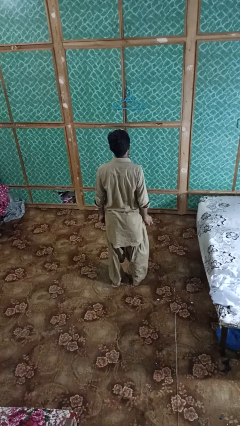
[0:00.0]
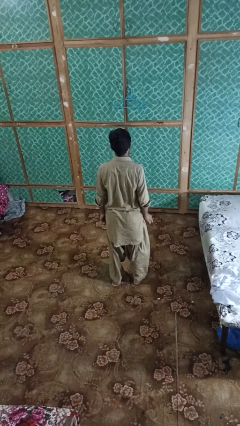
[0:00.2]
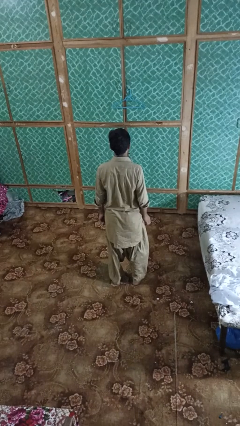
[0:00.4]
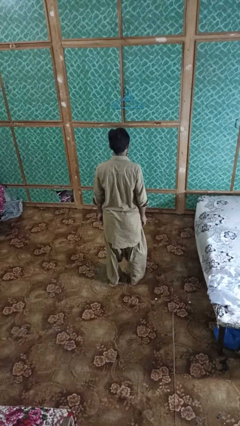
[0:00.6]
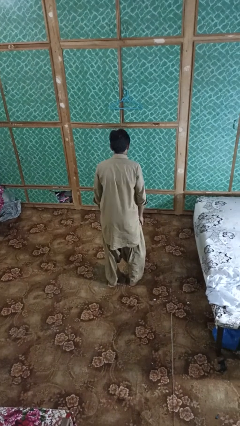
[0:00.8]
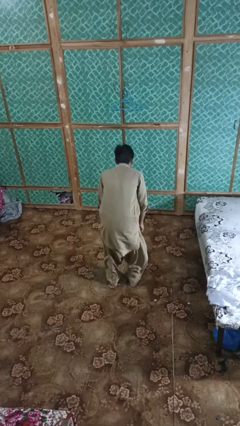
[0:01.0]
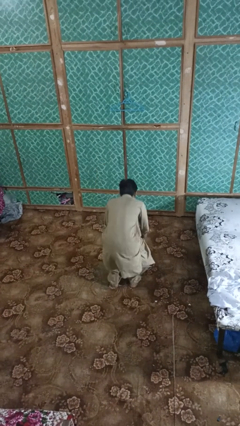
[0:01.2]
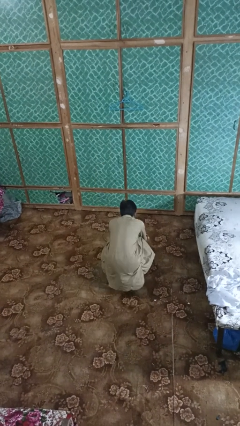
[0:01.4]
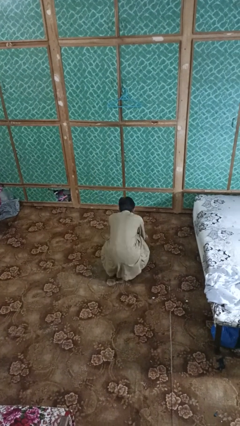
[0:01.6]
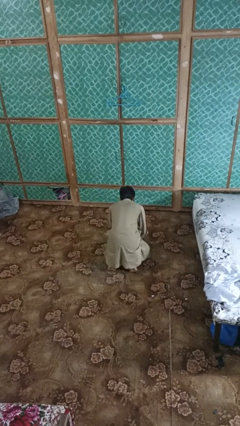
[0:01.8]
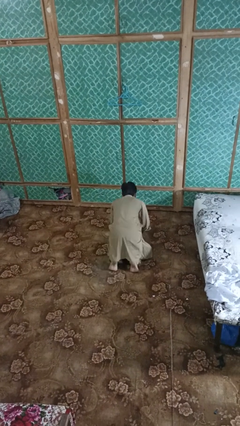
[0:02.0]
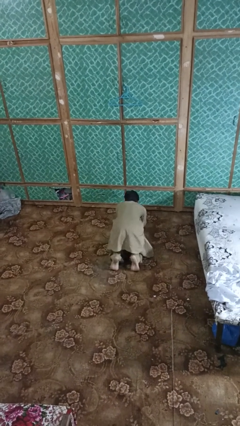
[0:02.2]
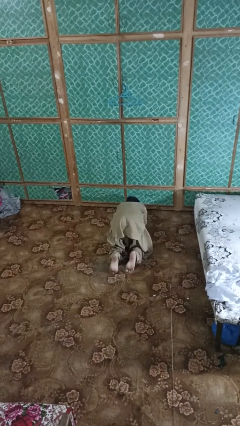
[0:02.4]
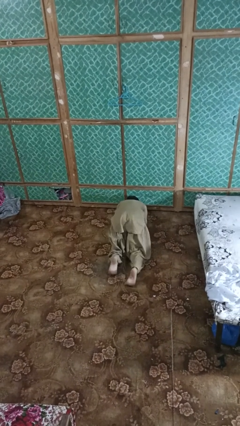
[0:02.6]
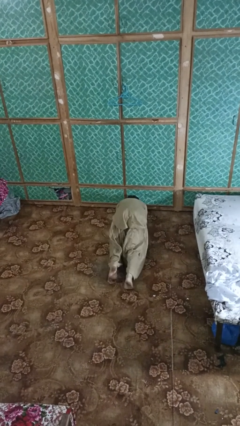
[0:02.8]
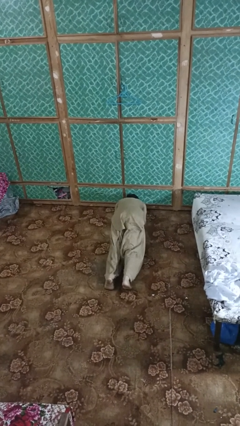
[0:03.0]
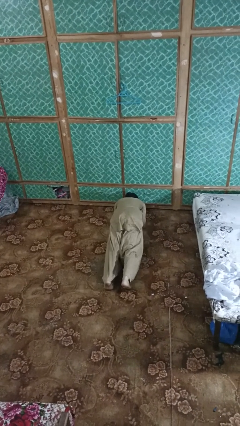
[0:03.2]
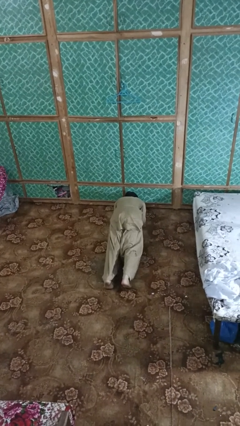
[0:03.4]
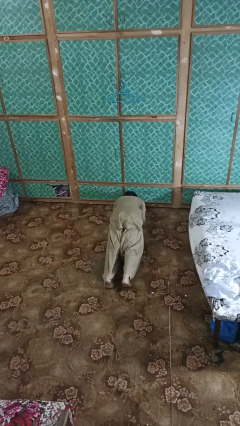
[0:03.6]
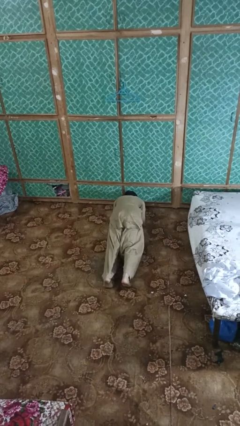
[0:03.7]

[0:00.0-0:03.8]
person exercises with plank

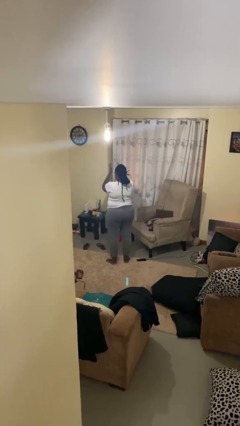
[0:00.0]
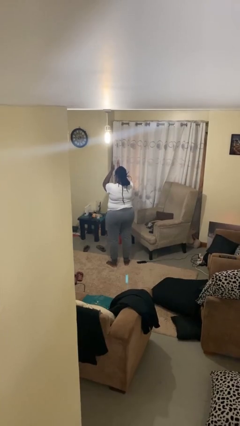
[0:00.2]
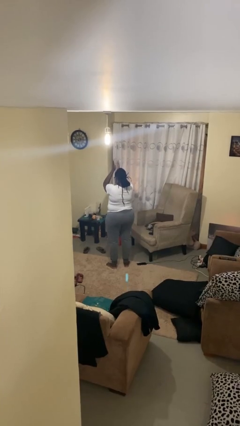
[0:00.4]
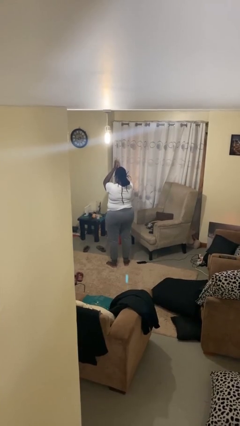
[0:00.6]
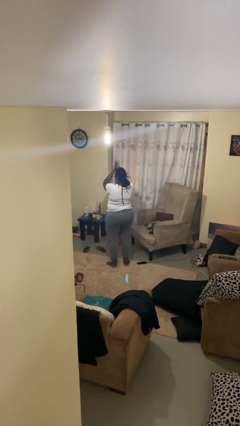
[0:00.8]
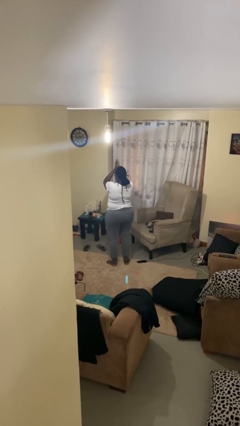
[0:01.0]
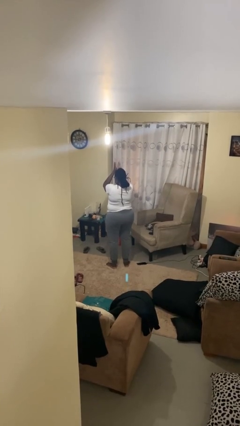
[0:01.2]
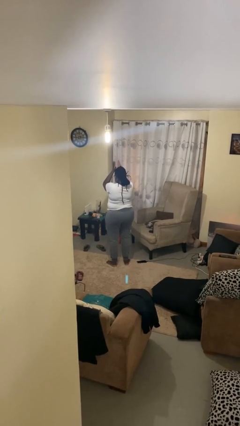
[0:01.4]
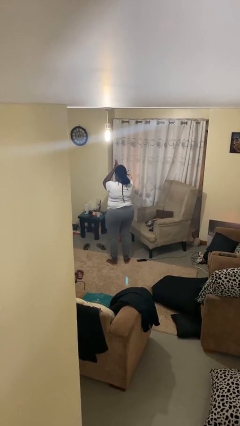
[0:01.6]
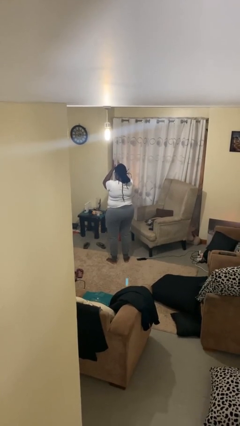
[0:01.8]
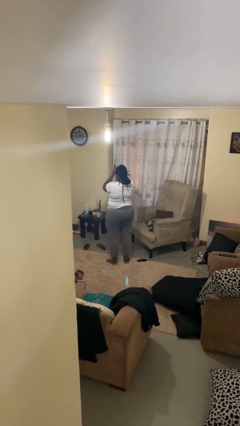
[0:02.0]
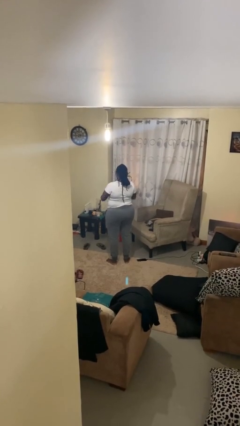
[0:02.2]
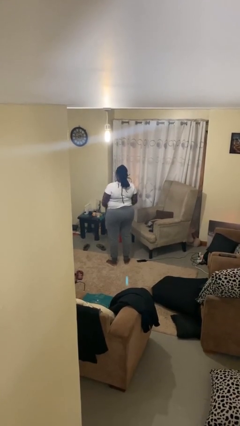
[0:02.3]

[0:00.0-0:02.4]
person claps hands

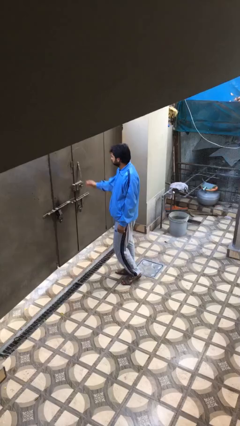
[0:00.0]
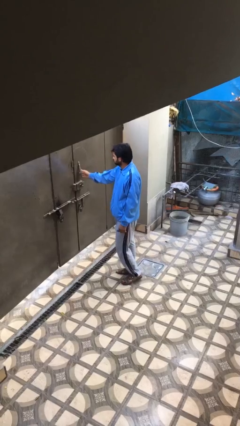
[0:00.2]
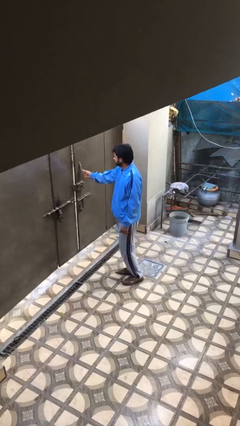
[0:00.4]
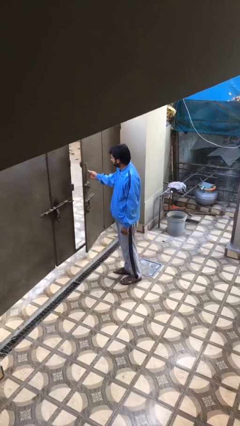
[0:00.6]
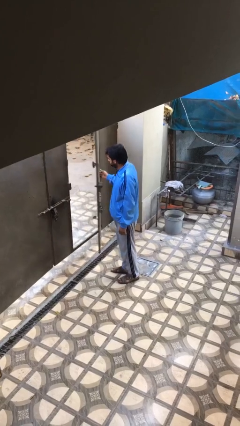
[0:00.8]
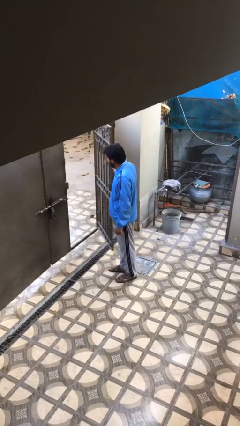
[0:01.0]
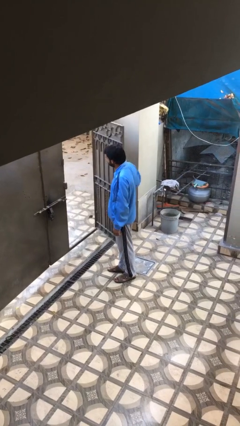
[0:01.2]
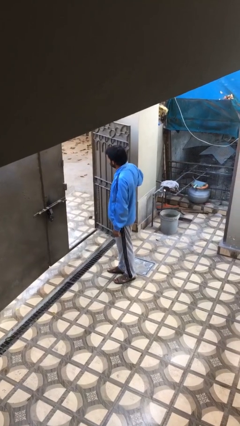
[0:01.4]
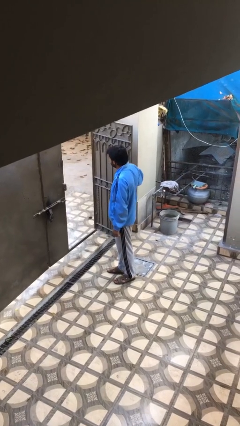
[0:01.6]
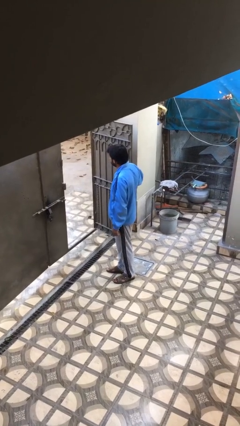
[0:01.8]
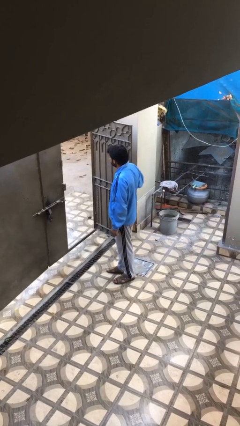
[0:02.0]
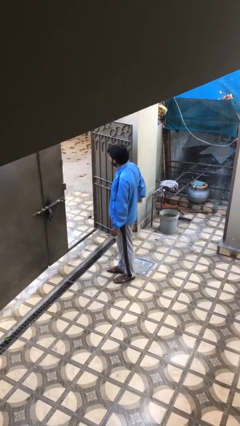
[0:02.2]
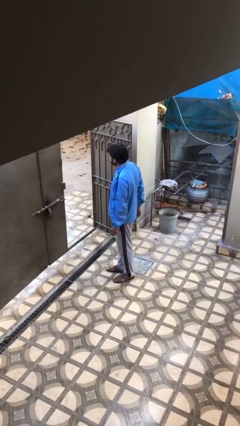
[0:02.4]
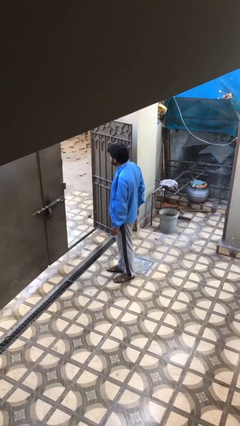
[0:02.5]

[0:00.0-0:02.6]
person opens facility door

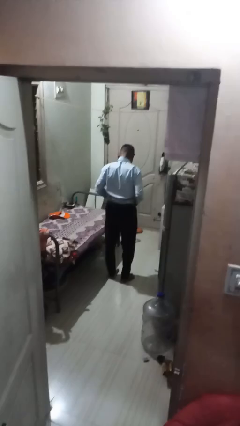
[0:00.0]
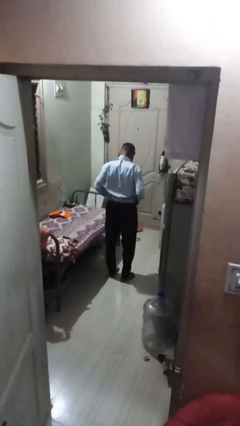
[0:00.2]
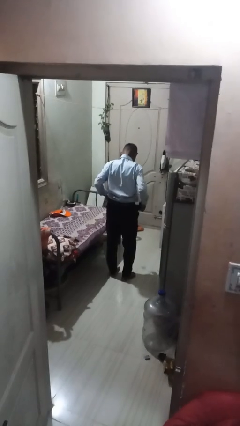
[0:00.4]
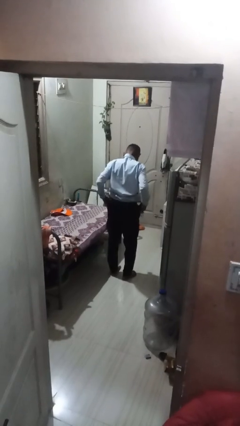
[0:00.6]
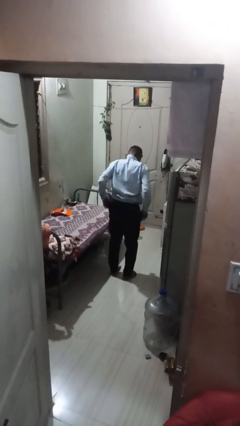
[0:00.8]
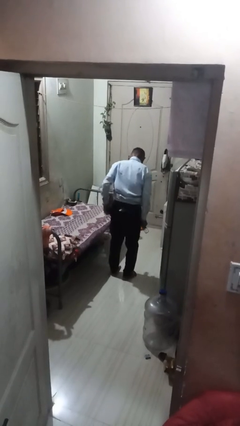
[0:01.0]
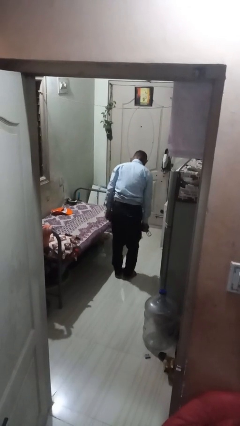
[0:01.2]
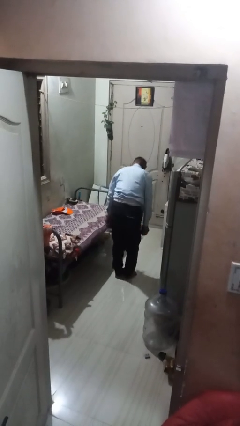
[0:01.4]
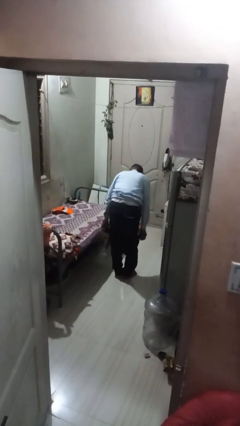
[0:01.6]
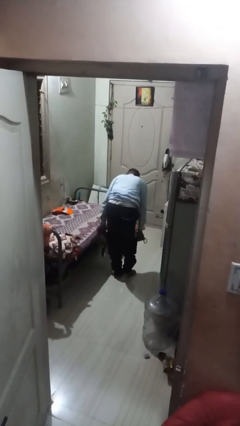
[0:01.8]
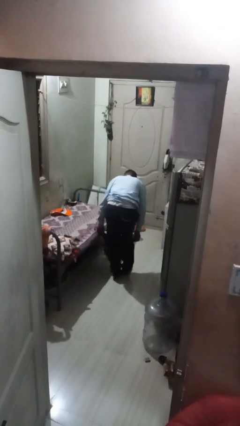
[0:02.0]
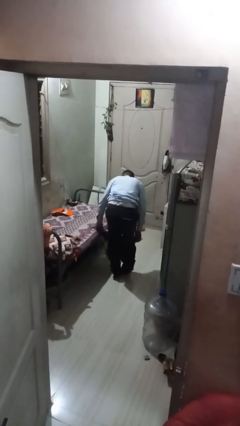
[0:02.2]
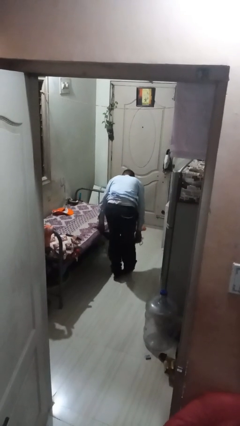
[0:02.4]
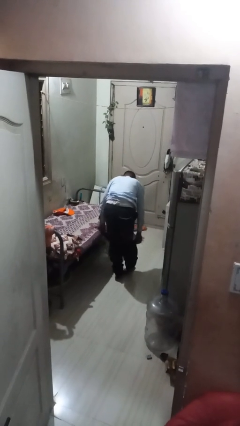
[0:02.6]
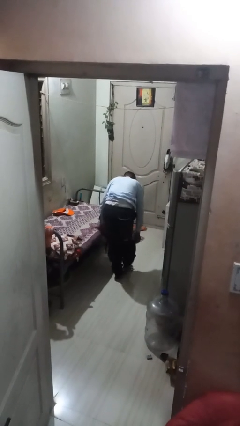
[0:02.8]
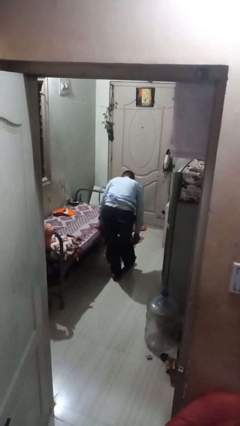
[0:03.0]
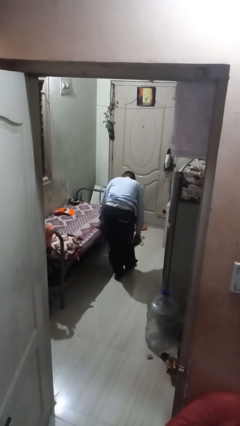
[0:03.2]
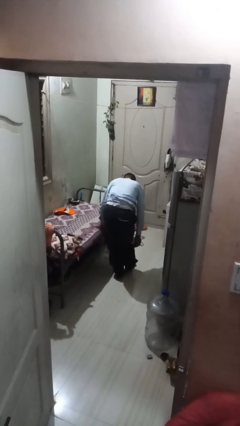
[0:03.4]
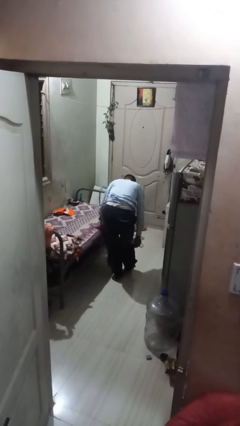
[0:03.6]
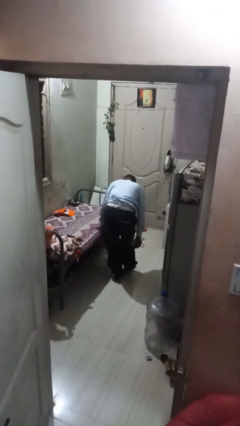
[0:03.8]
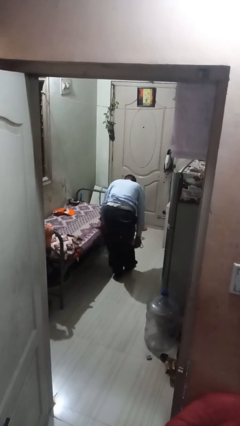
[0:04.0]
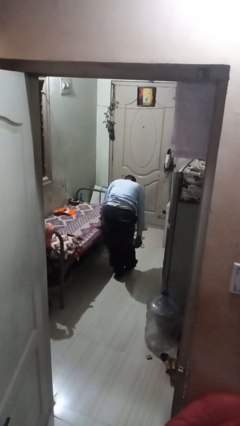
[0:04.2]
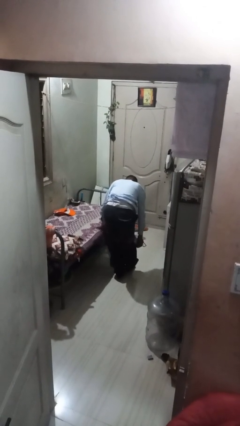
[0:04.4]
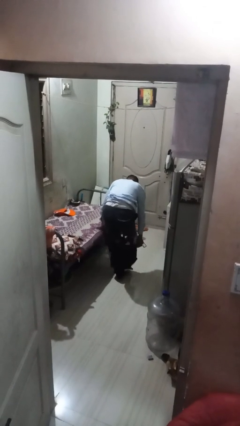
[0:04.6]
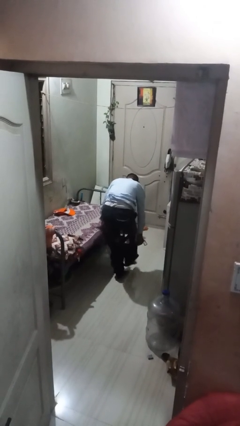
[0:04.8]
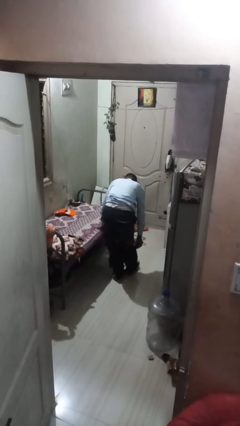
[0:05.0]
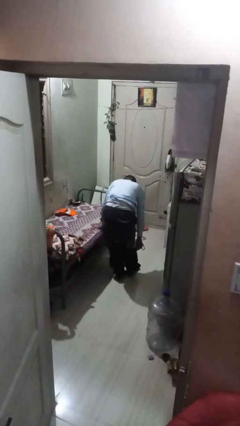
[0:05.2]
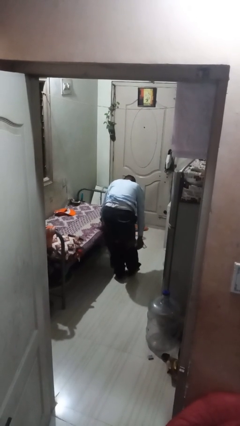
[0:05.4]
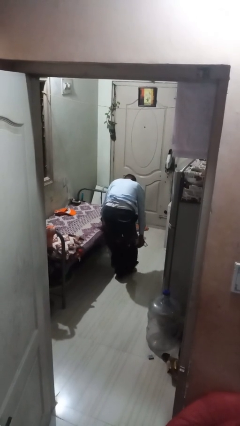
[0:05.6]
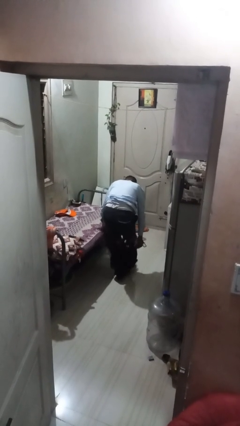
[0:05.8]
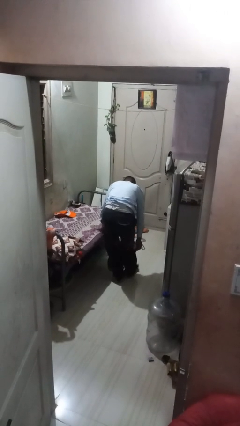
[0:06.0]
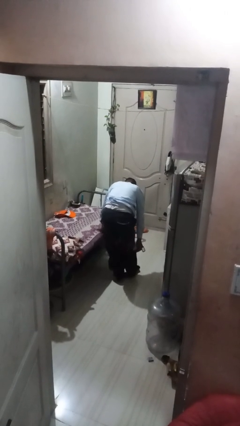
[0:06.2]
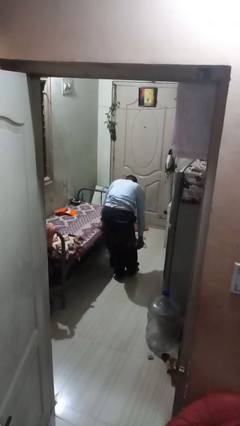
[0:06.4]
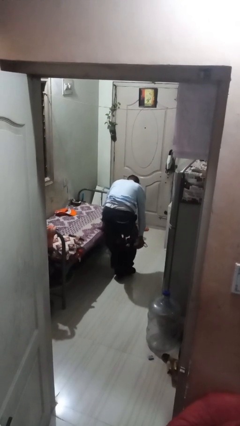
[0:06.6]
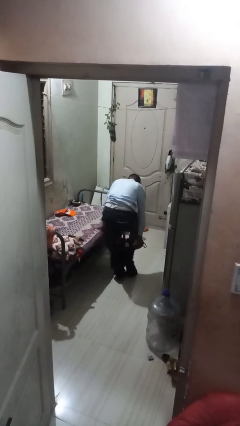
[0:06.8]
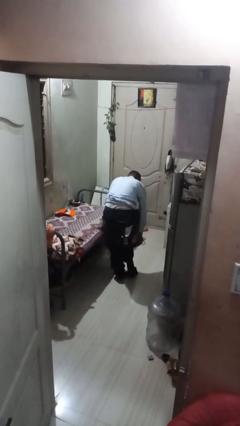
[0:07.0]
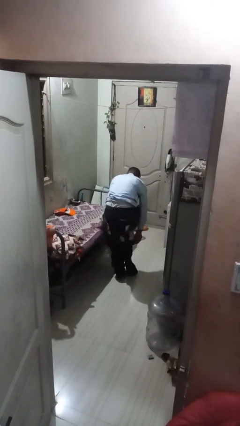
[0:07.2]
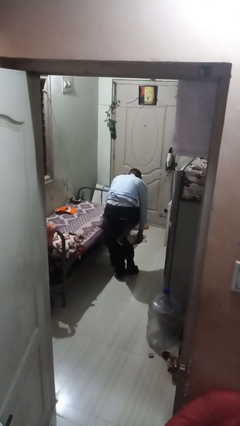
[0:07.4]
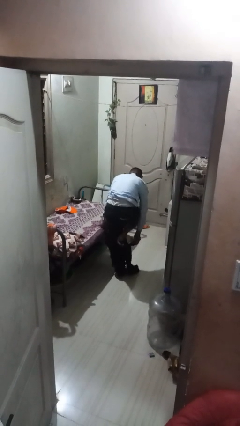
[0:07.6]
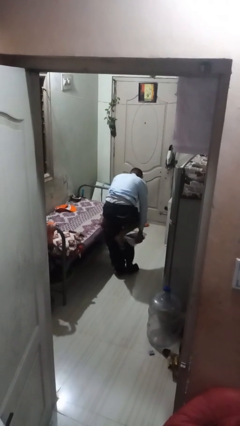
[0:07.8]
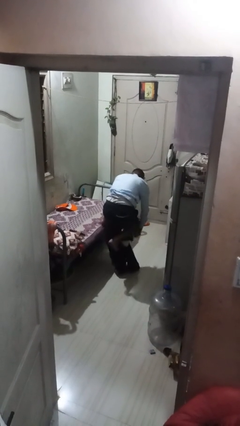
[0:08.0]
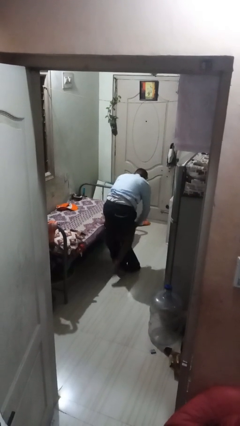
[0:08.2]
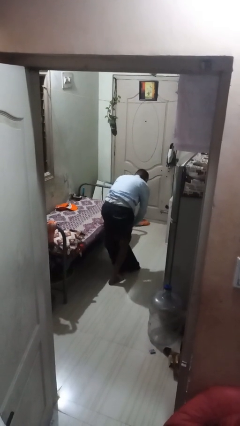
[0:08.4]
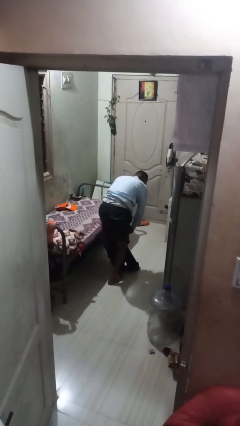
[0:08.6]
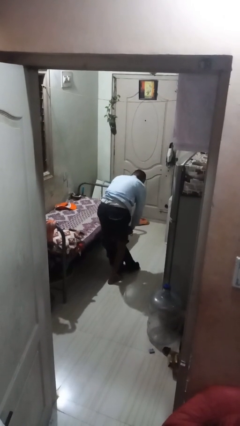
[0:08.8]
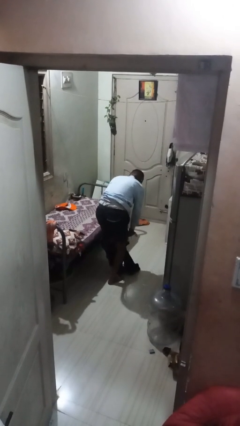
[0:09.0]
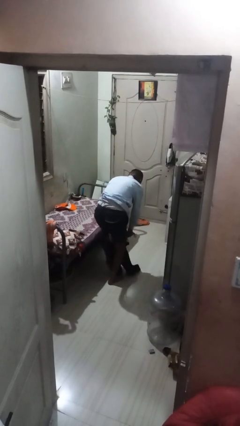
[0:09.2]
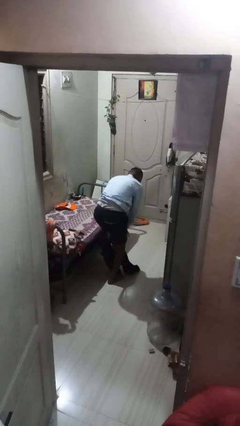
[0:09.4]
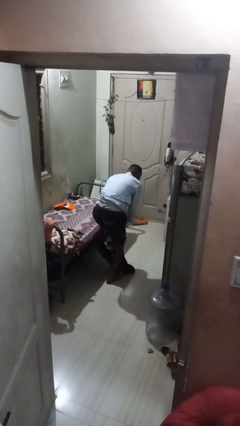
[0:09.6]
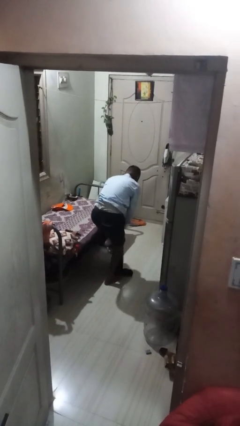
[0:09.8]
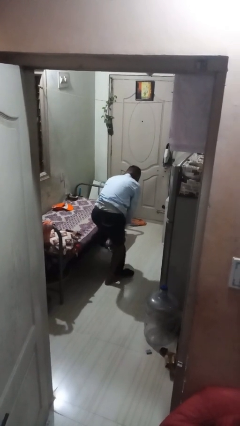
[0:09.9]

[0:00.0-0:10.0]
person takes off pants
